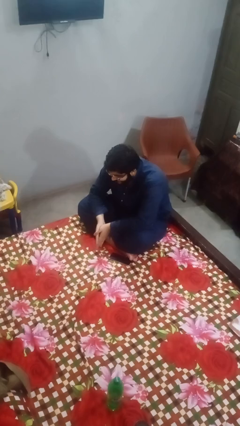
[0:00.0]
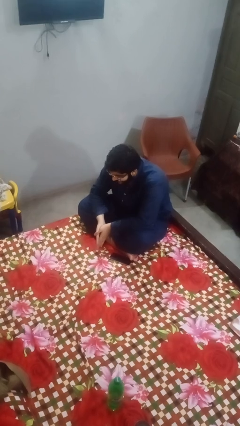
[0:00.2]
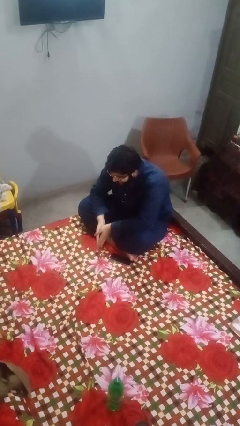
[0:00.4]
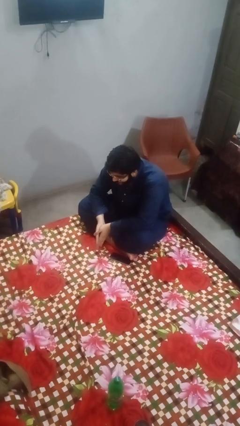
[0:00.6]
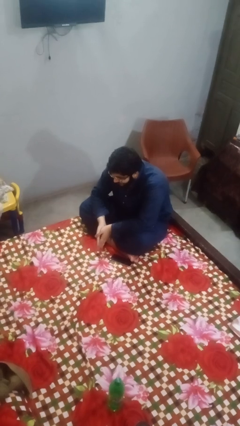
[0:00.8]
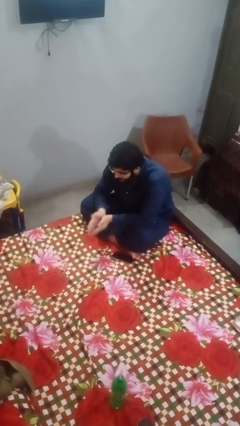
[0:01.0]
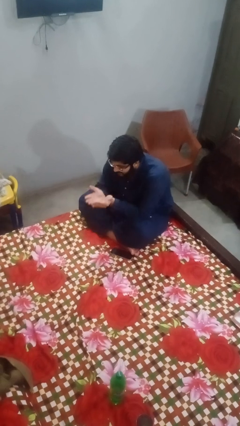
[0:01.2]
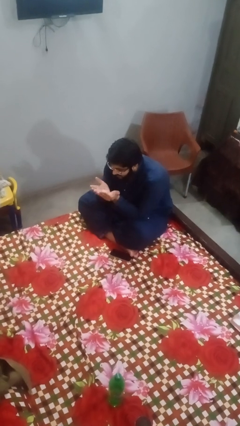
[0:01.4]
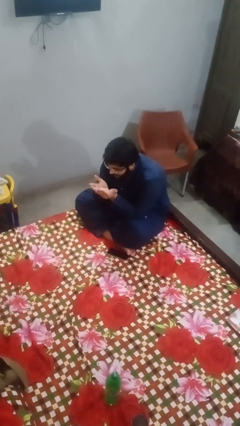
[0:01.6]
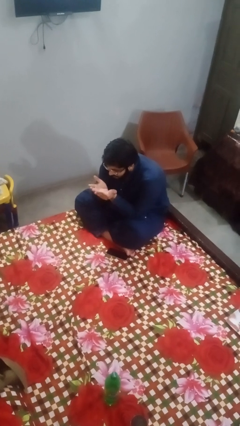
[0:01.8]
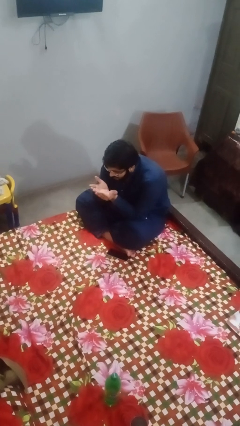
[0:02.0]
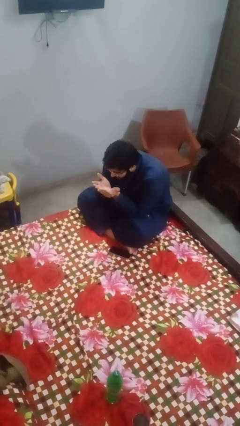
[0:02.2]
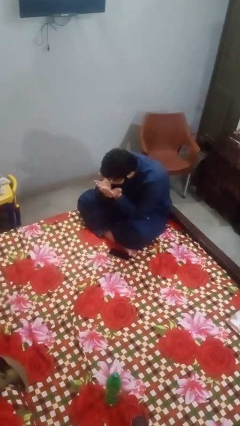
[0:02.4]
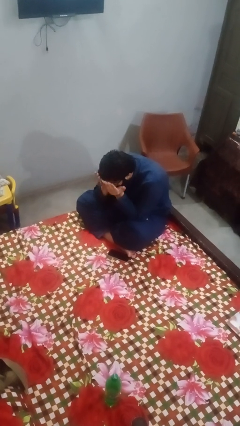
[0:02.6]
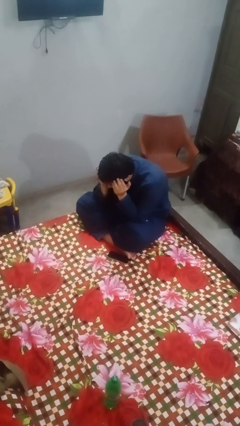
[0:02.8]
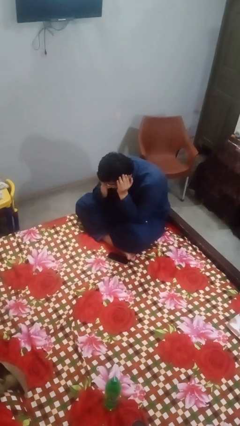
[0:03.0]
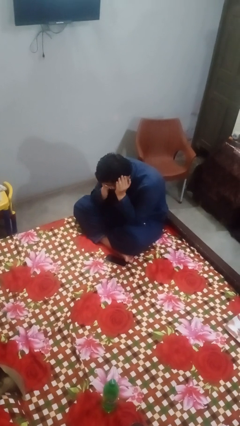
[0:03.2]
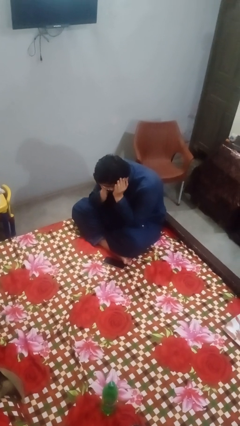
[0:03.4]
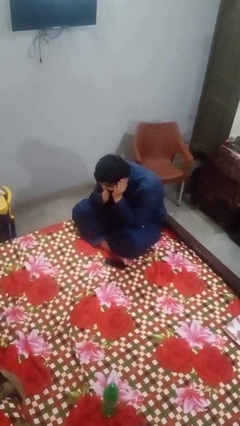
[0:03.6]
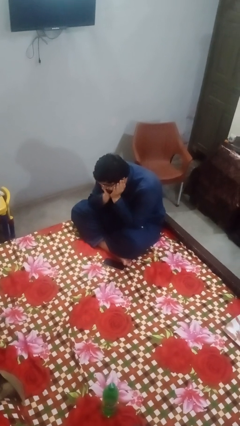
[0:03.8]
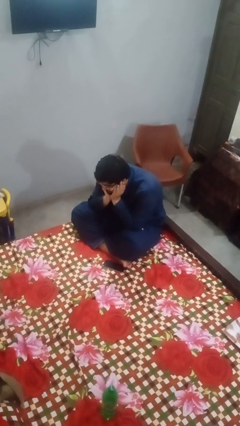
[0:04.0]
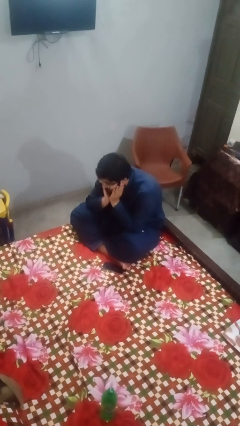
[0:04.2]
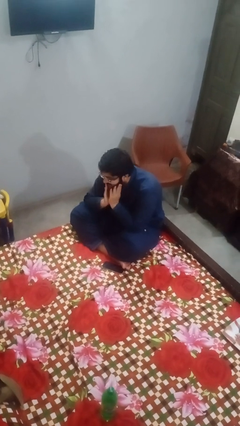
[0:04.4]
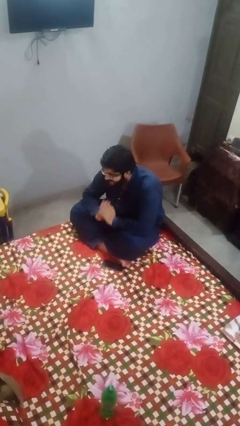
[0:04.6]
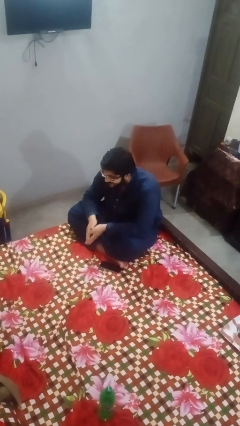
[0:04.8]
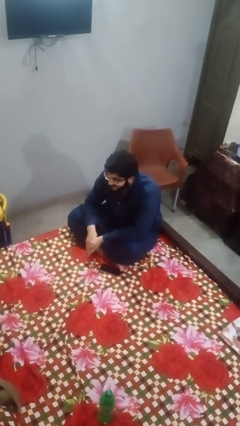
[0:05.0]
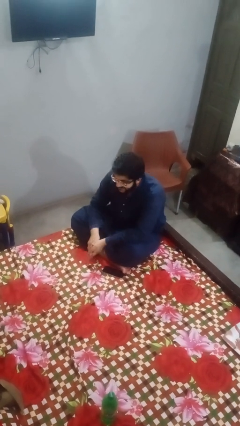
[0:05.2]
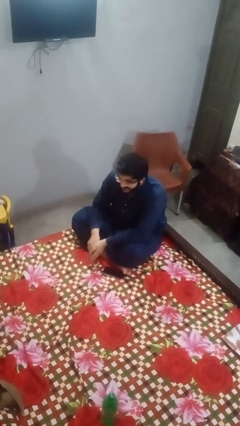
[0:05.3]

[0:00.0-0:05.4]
person prays

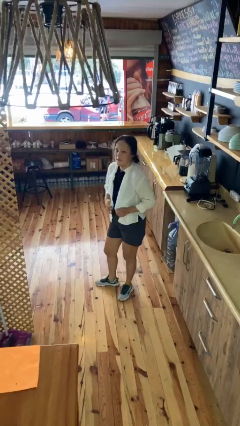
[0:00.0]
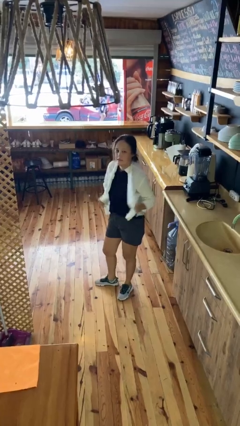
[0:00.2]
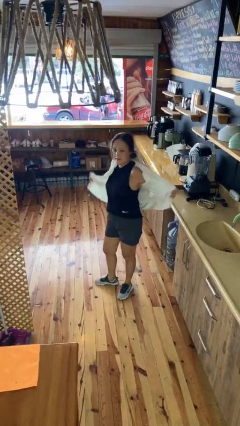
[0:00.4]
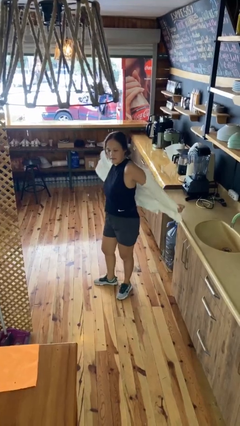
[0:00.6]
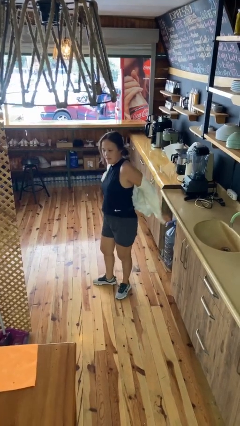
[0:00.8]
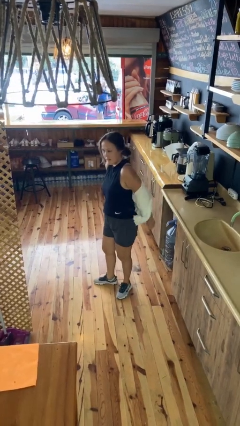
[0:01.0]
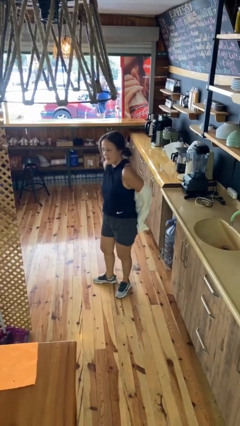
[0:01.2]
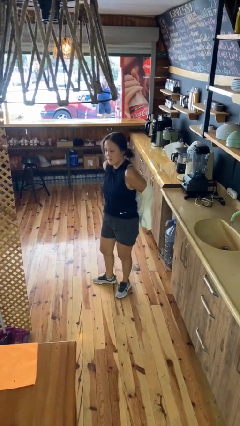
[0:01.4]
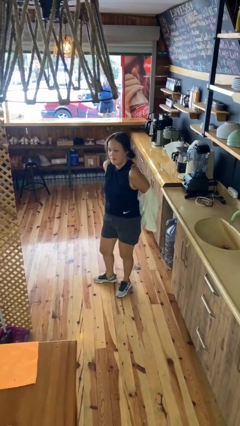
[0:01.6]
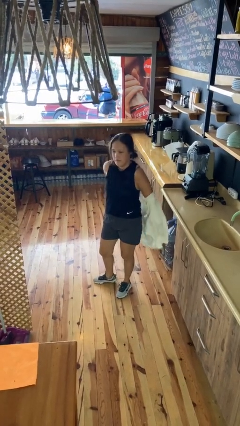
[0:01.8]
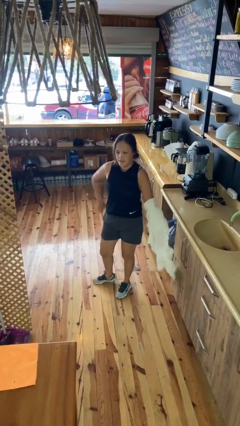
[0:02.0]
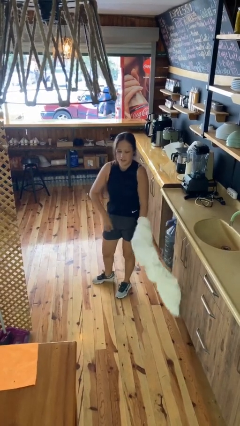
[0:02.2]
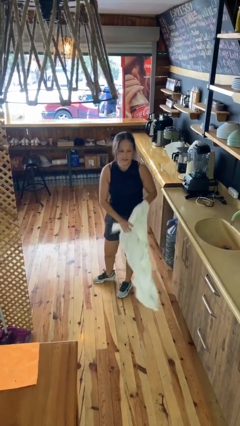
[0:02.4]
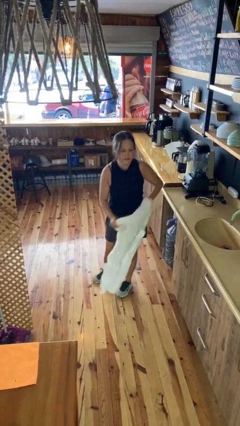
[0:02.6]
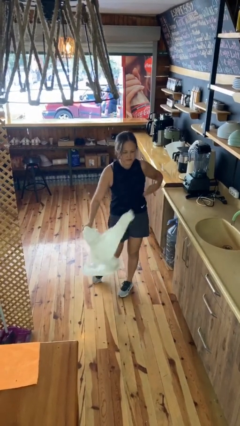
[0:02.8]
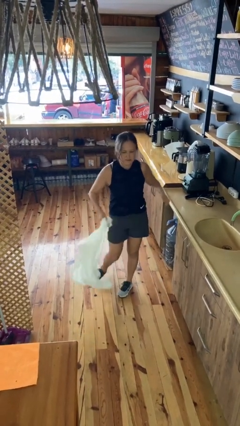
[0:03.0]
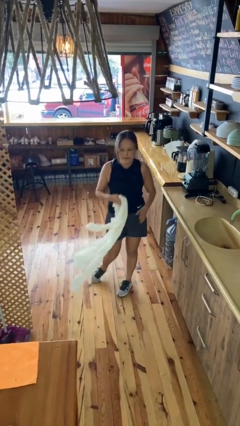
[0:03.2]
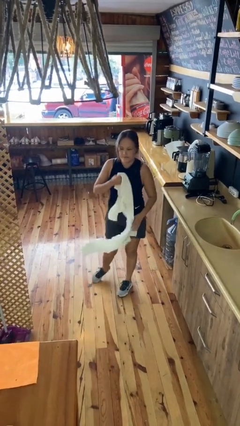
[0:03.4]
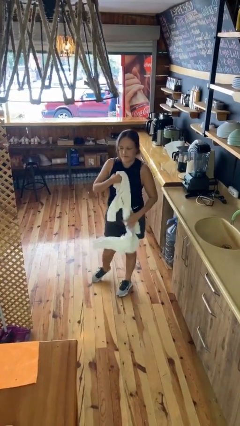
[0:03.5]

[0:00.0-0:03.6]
person takes off shirt

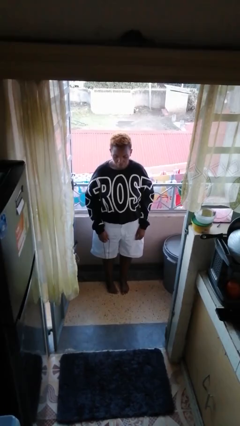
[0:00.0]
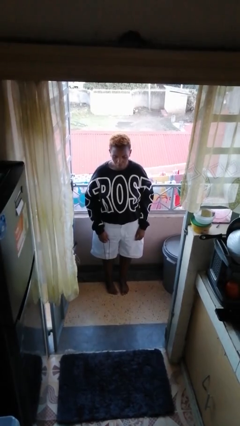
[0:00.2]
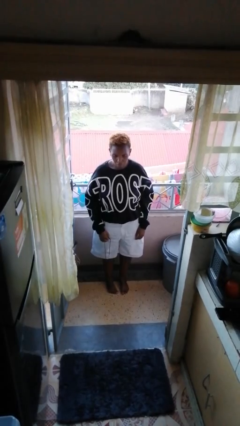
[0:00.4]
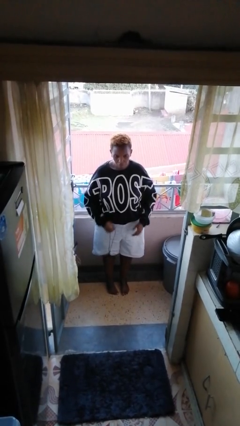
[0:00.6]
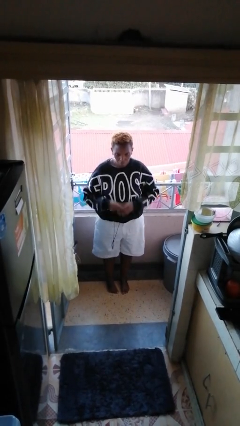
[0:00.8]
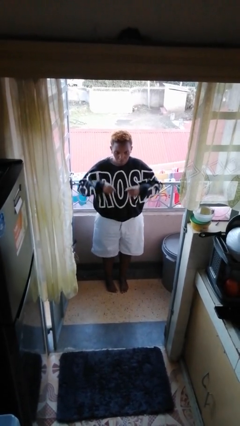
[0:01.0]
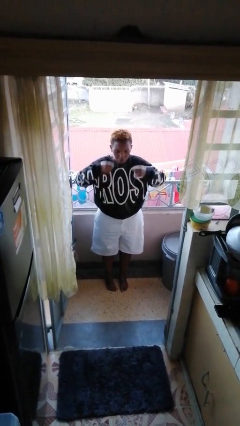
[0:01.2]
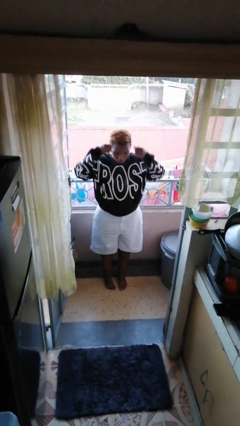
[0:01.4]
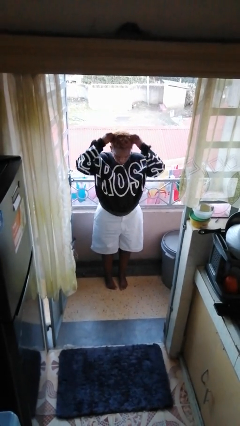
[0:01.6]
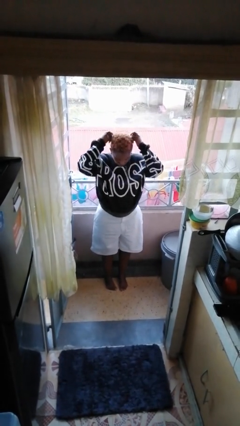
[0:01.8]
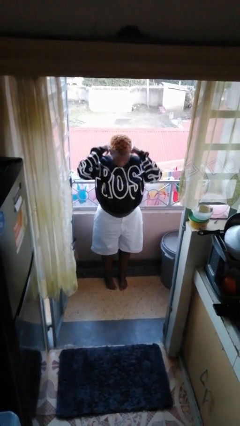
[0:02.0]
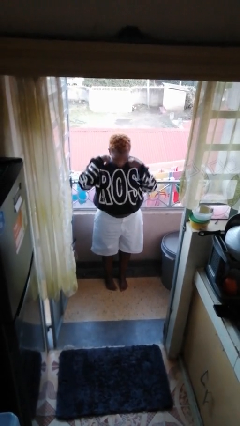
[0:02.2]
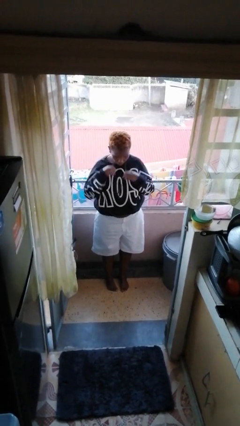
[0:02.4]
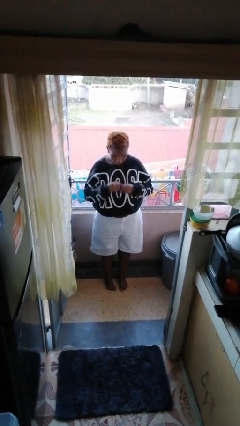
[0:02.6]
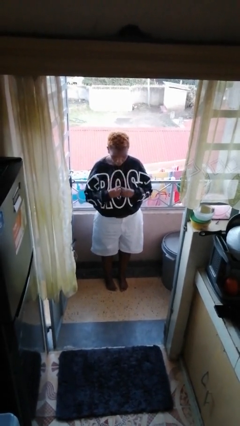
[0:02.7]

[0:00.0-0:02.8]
person puts on necklace

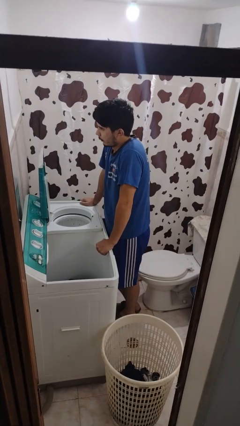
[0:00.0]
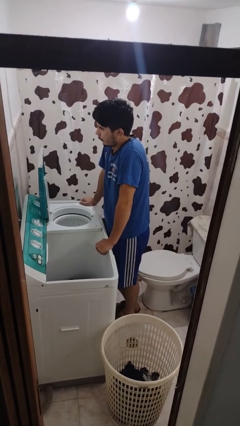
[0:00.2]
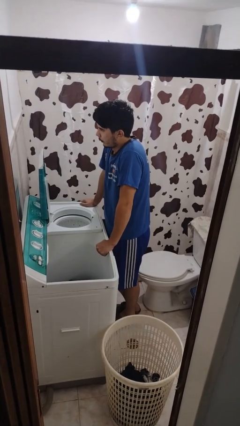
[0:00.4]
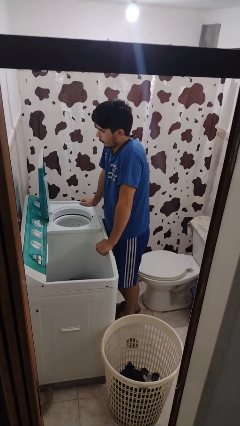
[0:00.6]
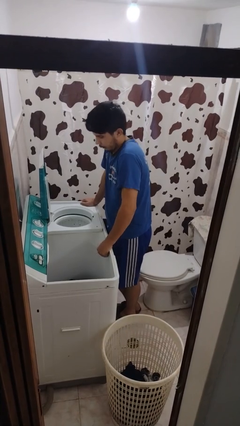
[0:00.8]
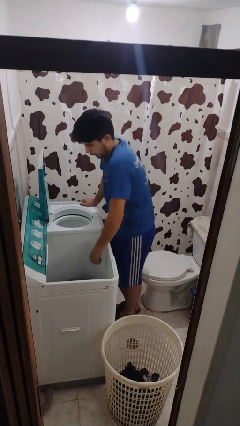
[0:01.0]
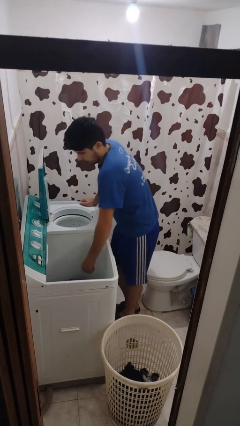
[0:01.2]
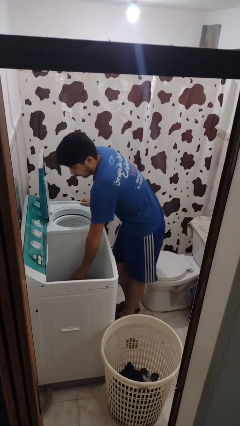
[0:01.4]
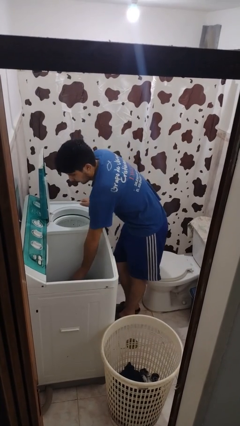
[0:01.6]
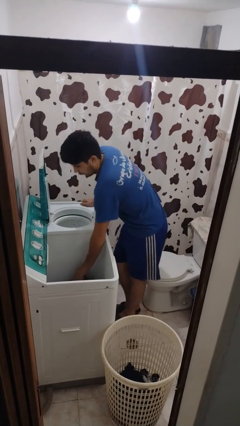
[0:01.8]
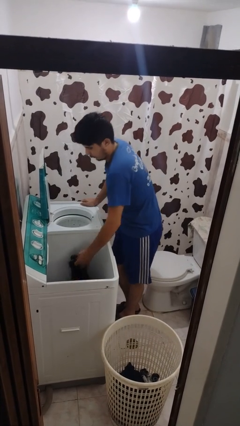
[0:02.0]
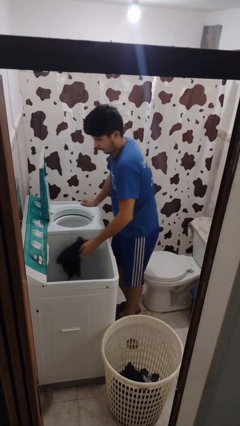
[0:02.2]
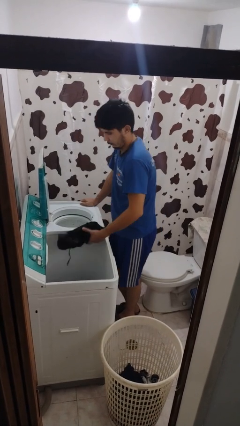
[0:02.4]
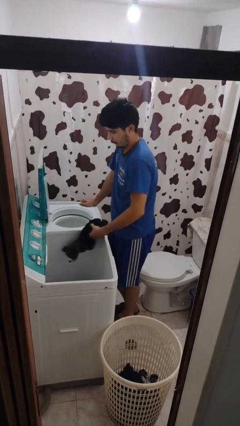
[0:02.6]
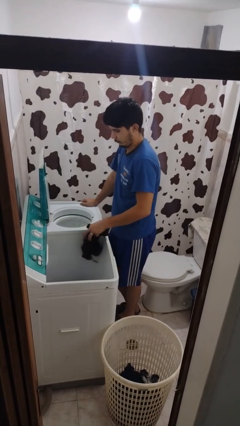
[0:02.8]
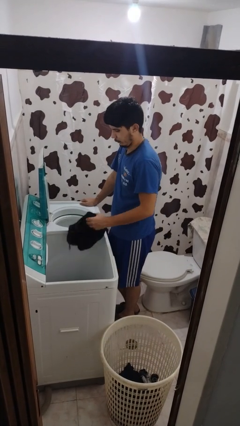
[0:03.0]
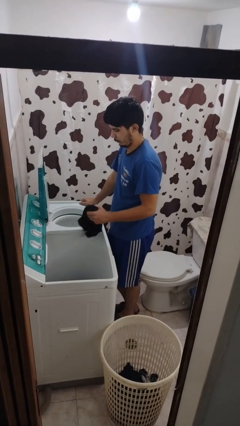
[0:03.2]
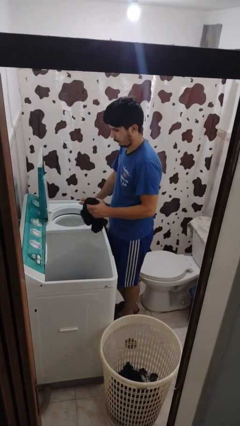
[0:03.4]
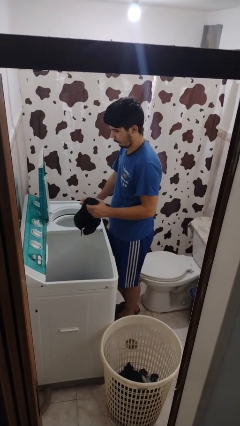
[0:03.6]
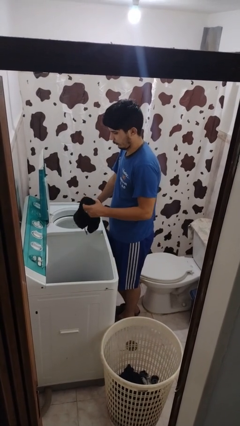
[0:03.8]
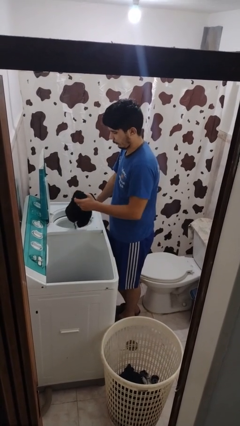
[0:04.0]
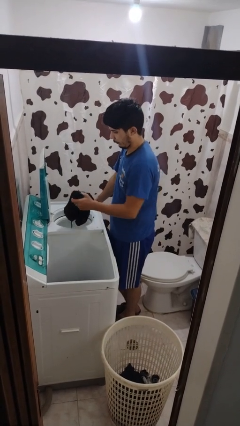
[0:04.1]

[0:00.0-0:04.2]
person unloads clotheswasher

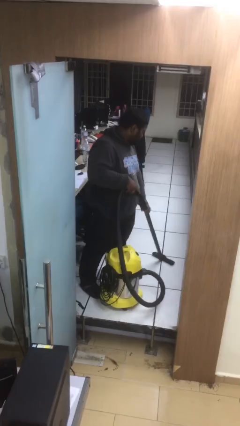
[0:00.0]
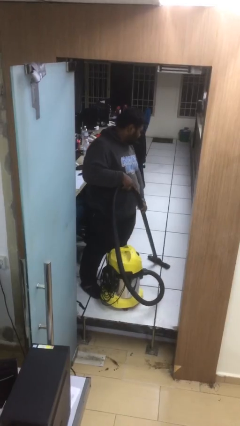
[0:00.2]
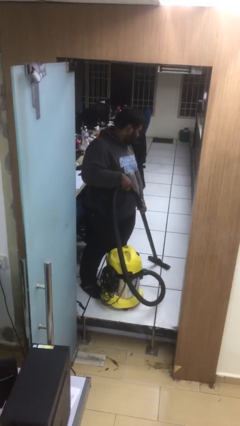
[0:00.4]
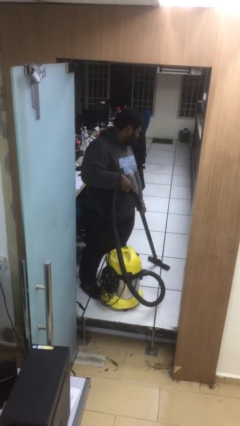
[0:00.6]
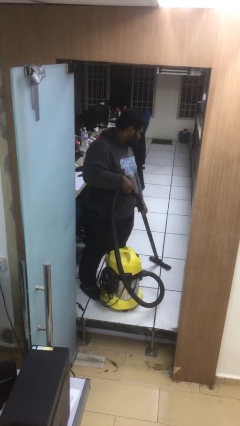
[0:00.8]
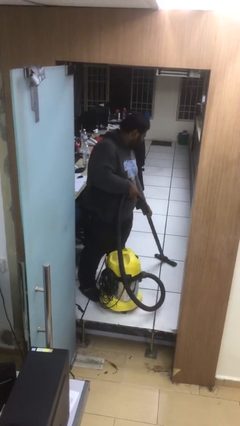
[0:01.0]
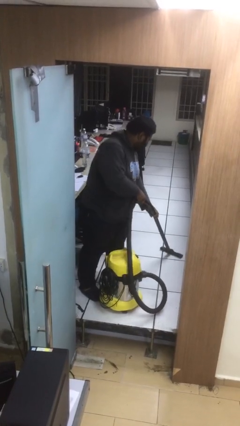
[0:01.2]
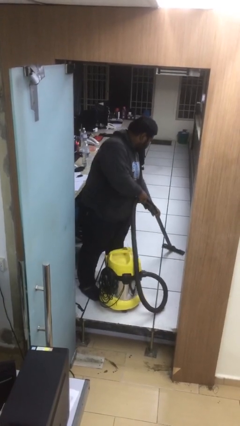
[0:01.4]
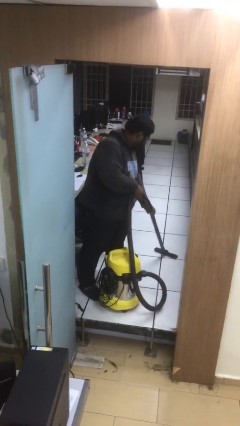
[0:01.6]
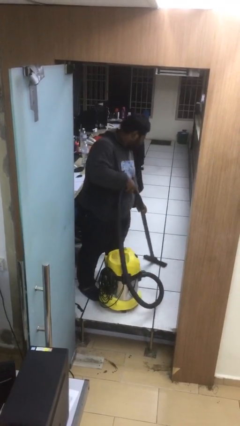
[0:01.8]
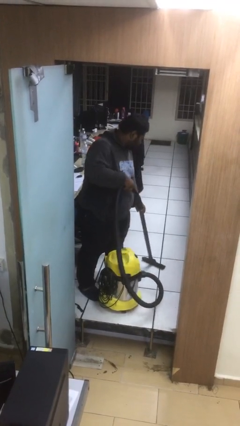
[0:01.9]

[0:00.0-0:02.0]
person vacuums carpet
